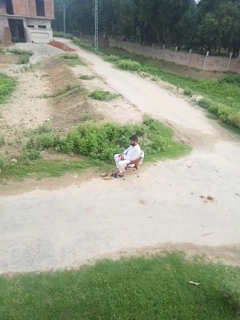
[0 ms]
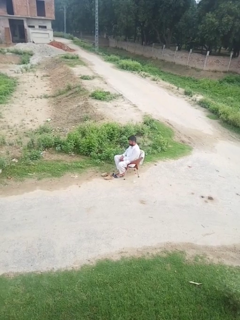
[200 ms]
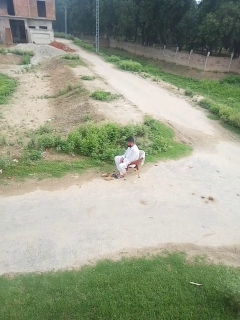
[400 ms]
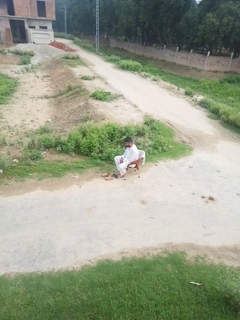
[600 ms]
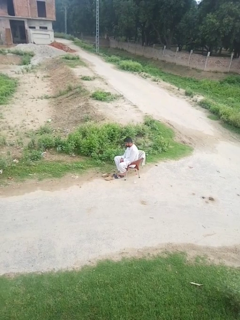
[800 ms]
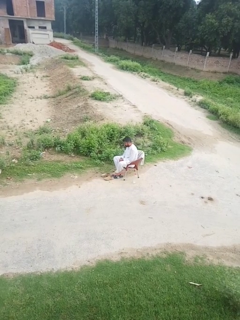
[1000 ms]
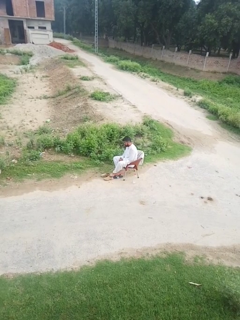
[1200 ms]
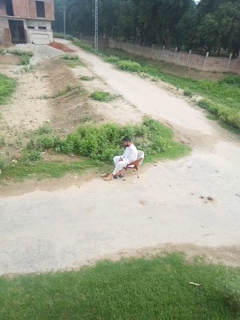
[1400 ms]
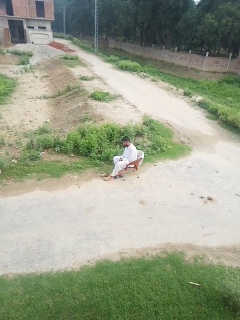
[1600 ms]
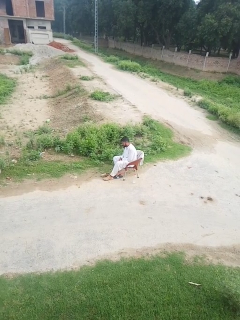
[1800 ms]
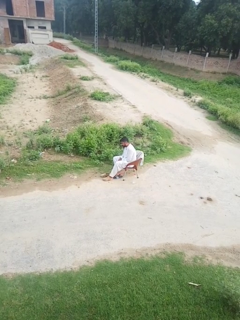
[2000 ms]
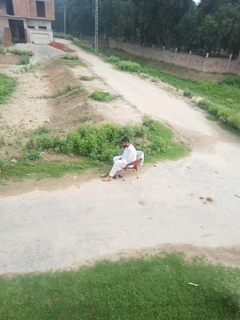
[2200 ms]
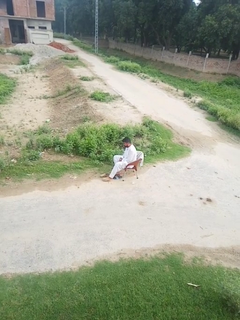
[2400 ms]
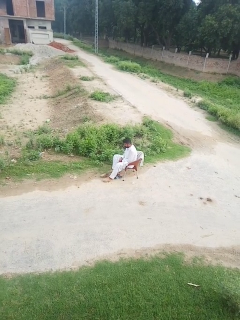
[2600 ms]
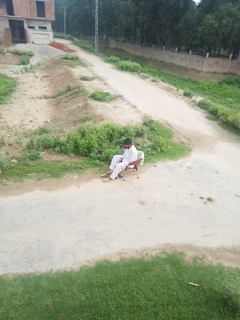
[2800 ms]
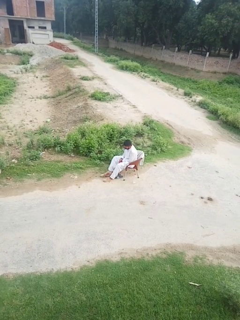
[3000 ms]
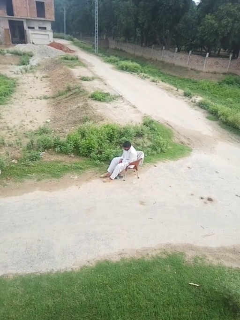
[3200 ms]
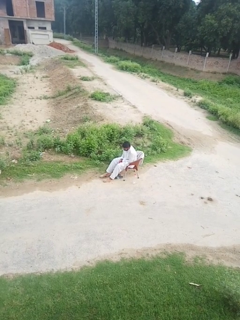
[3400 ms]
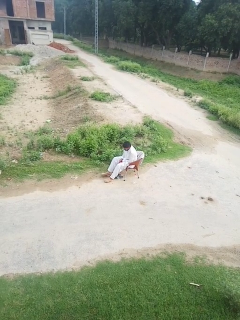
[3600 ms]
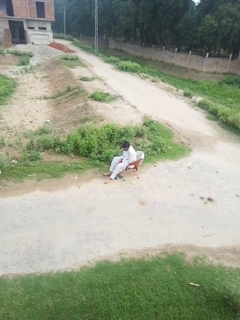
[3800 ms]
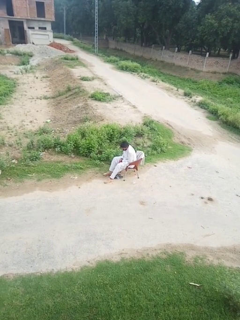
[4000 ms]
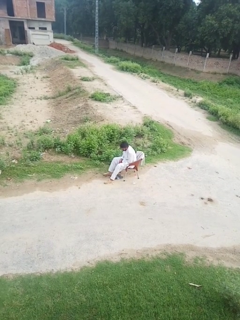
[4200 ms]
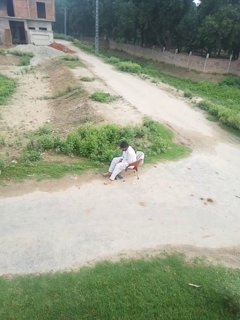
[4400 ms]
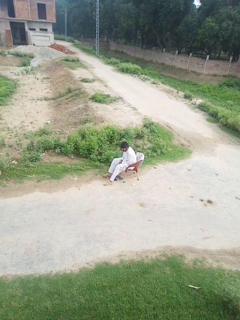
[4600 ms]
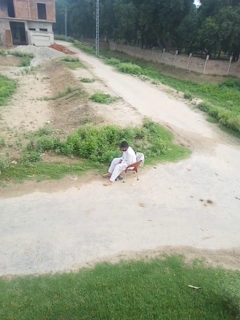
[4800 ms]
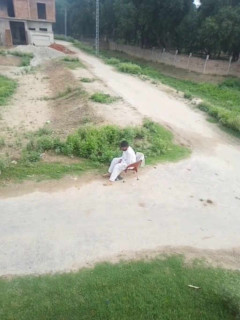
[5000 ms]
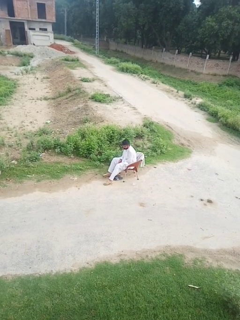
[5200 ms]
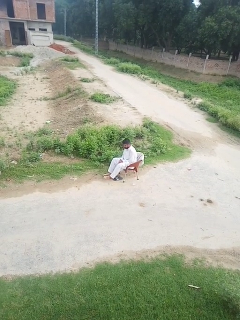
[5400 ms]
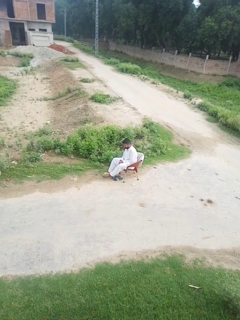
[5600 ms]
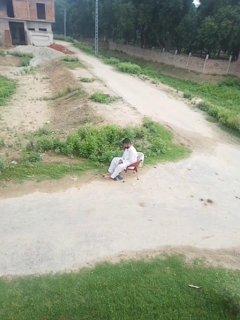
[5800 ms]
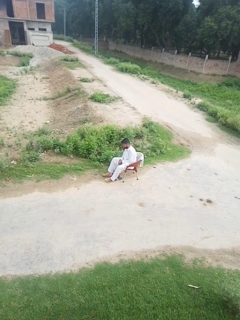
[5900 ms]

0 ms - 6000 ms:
person puts on shoes

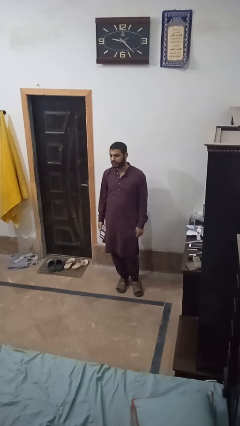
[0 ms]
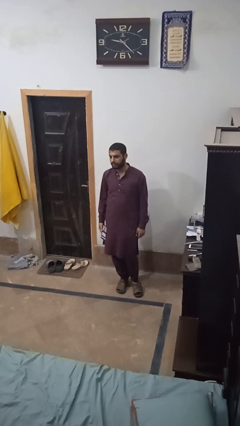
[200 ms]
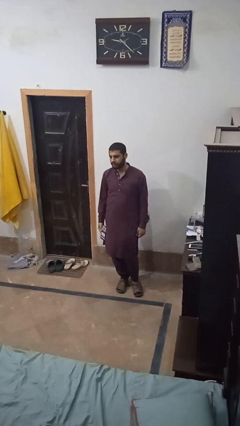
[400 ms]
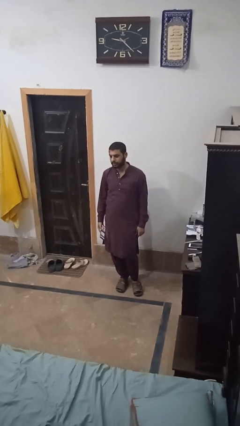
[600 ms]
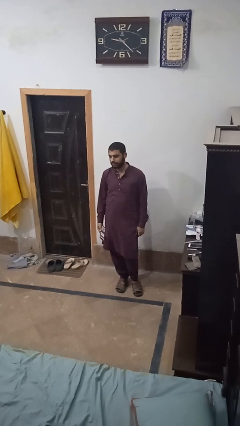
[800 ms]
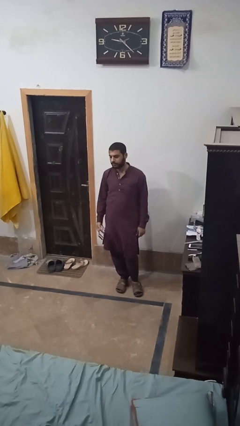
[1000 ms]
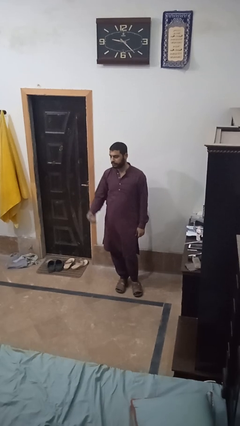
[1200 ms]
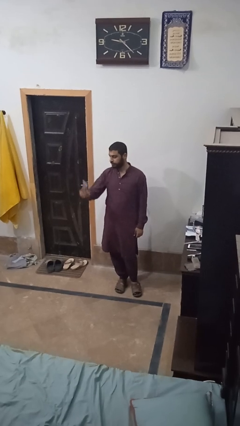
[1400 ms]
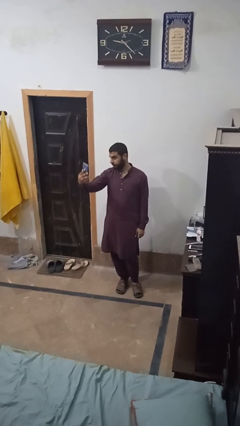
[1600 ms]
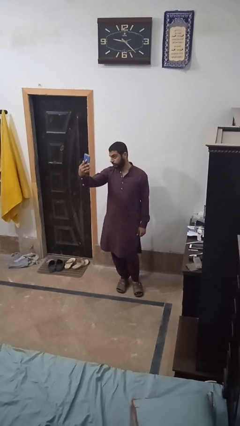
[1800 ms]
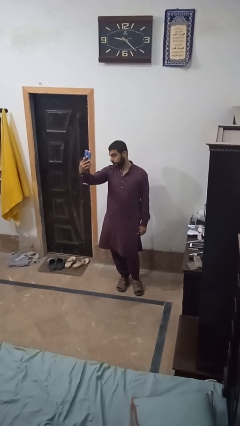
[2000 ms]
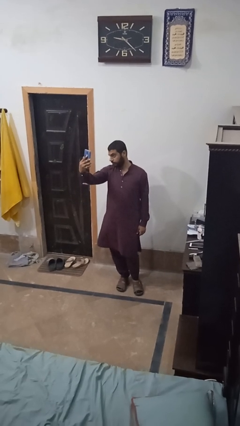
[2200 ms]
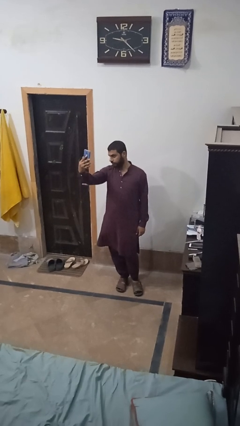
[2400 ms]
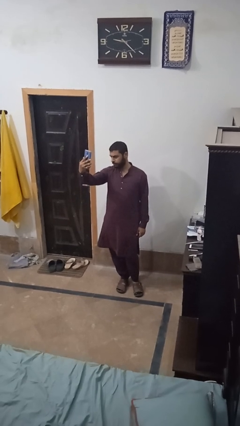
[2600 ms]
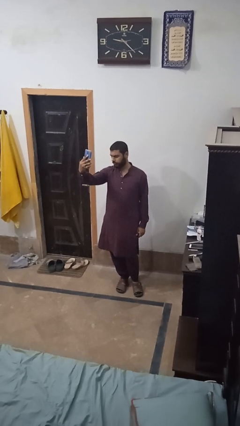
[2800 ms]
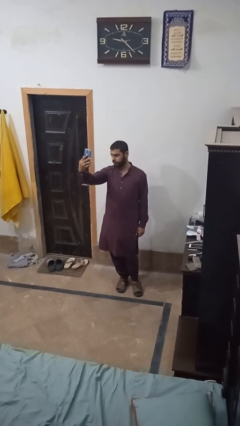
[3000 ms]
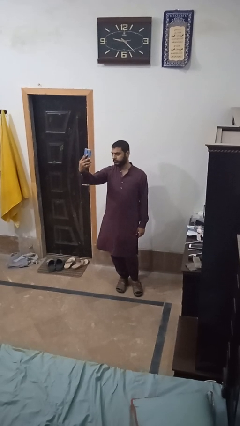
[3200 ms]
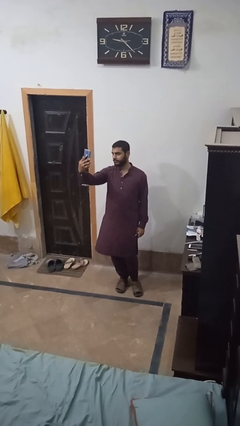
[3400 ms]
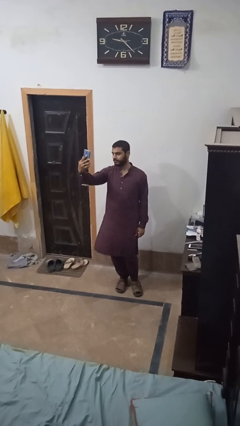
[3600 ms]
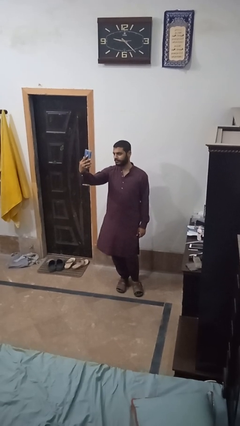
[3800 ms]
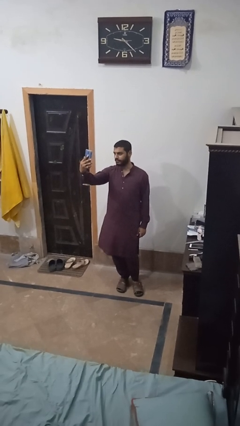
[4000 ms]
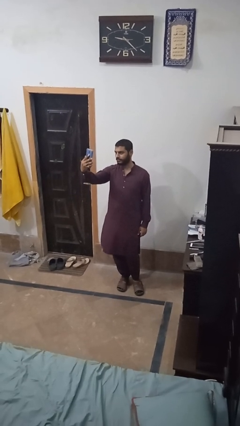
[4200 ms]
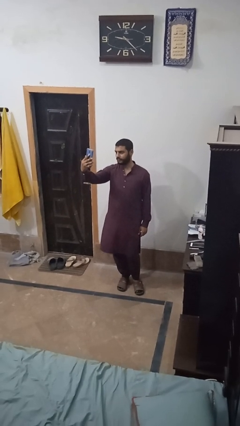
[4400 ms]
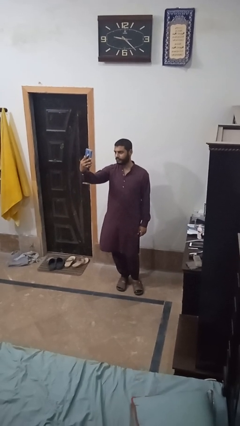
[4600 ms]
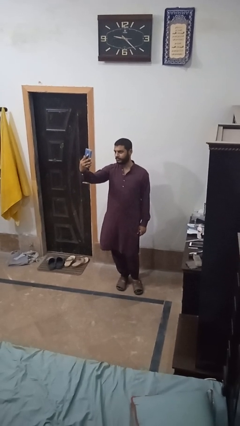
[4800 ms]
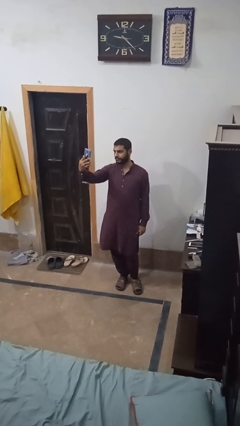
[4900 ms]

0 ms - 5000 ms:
person takes selfie

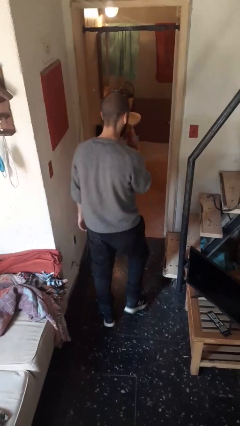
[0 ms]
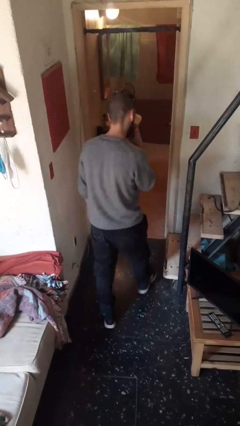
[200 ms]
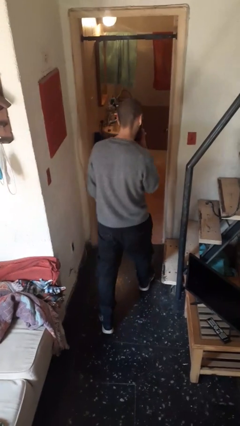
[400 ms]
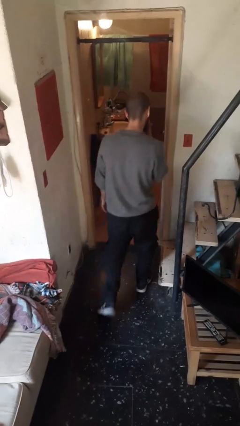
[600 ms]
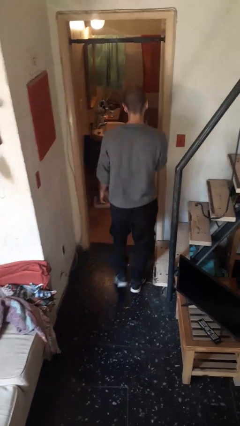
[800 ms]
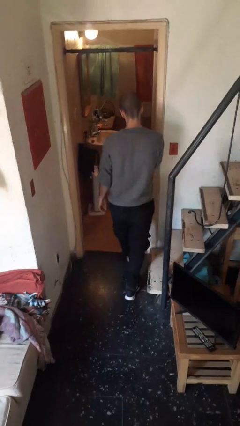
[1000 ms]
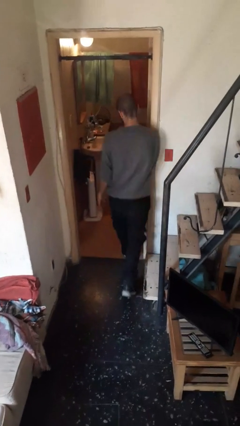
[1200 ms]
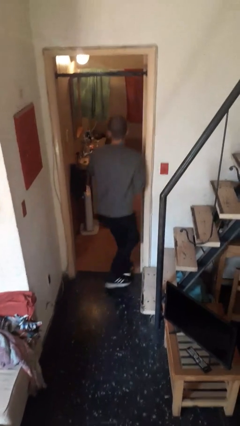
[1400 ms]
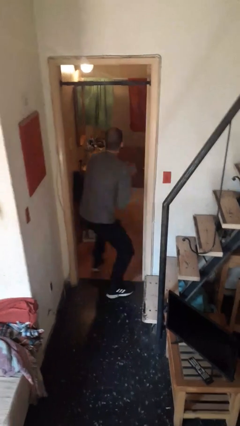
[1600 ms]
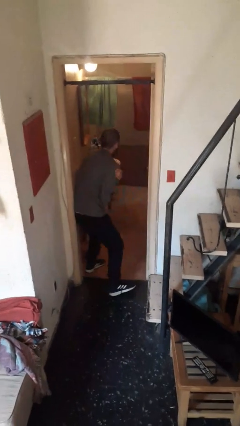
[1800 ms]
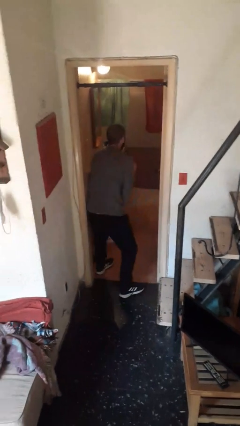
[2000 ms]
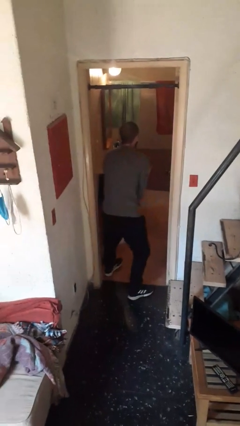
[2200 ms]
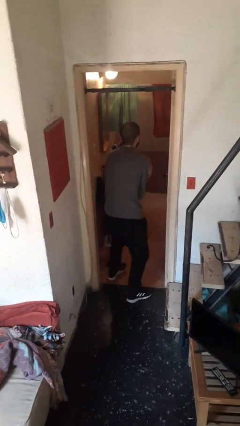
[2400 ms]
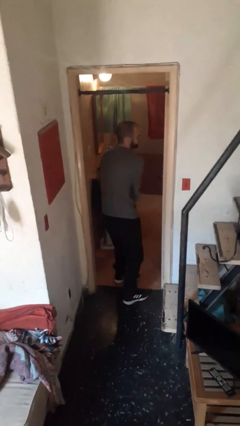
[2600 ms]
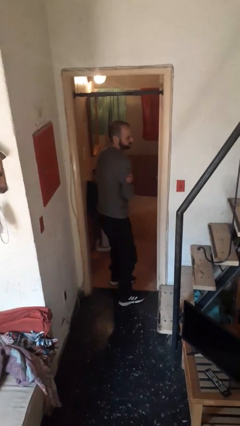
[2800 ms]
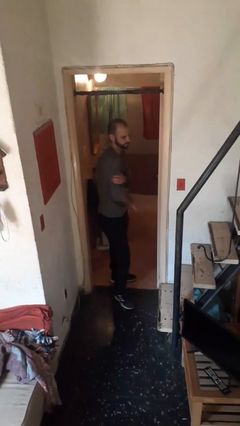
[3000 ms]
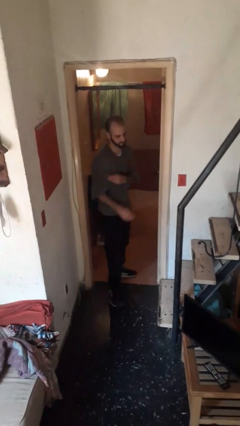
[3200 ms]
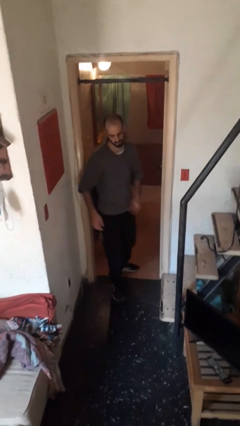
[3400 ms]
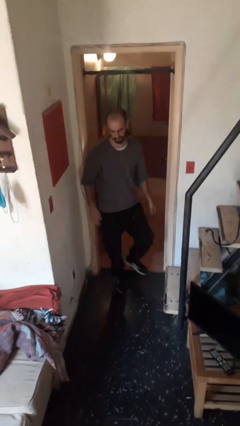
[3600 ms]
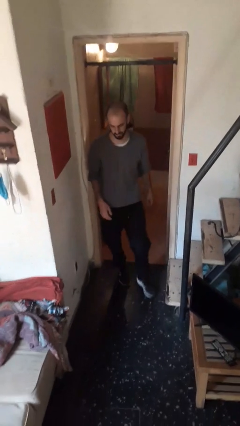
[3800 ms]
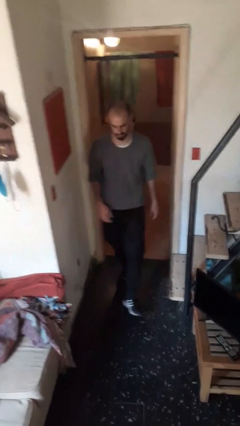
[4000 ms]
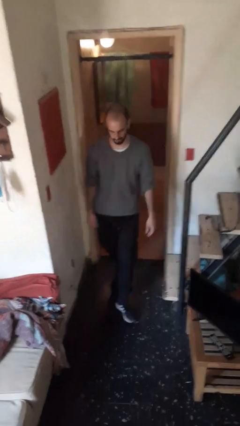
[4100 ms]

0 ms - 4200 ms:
person bumps into wall

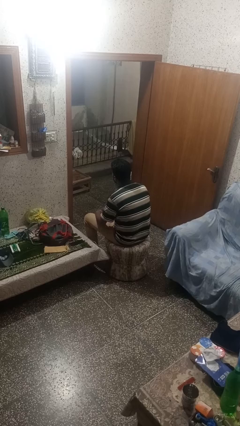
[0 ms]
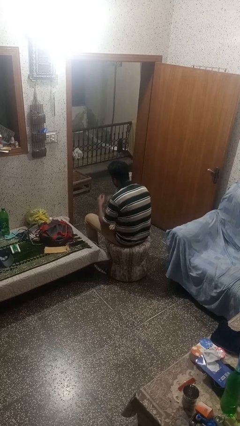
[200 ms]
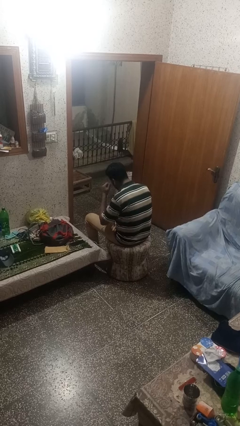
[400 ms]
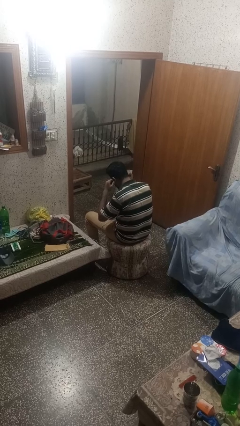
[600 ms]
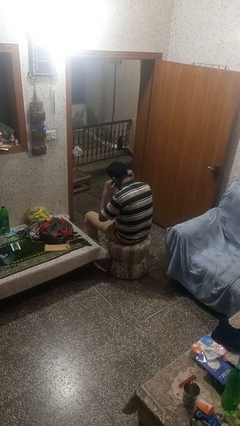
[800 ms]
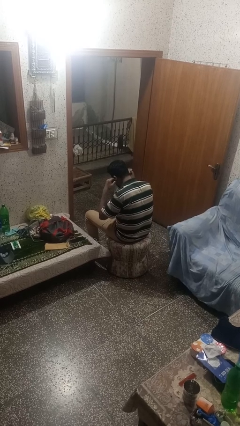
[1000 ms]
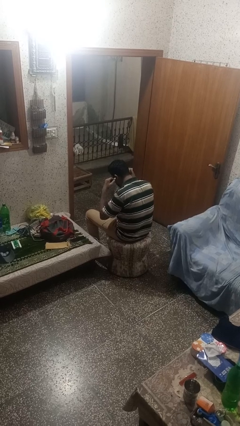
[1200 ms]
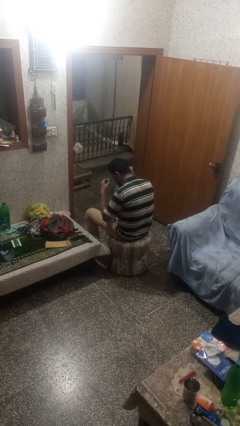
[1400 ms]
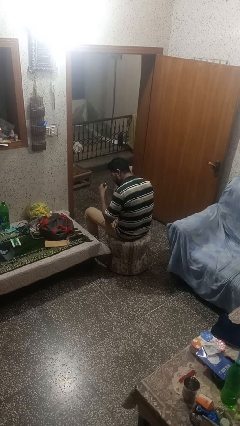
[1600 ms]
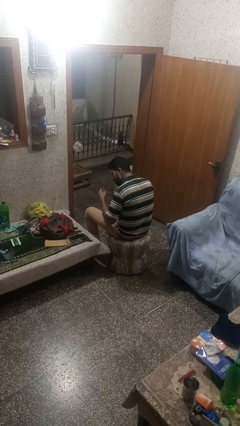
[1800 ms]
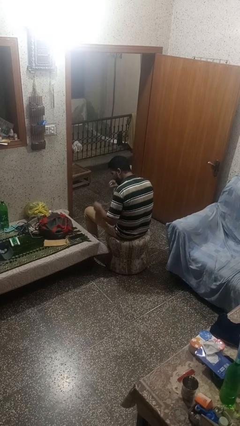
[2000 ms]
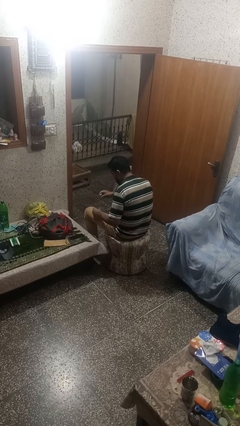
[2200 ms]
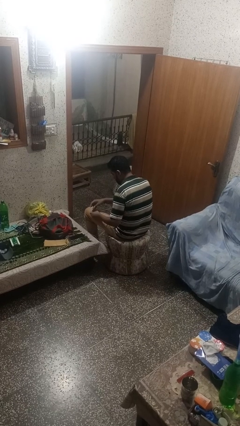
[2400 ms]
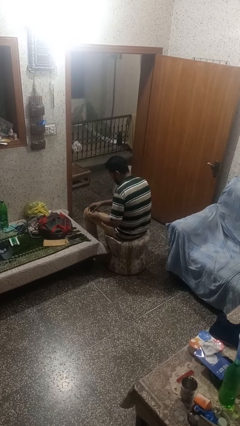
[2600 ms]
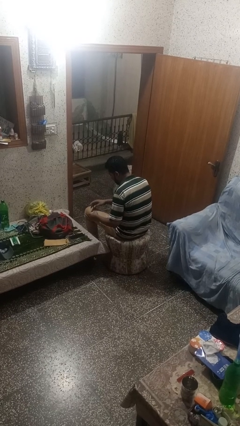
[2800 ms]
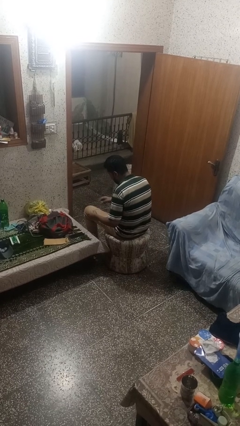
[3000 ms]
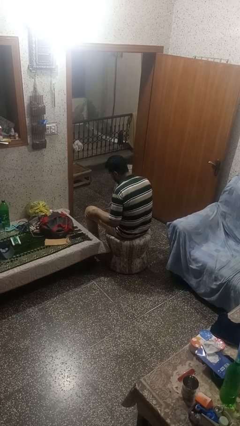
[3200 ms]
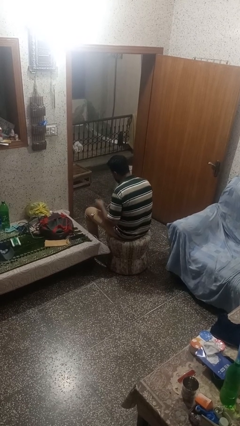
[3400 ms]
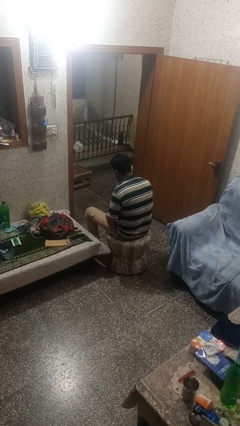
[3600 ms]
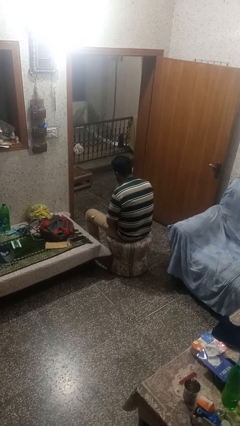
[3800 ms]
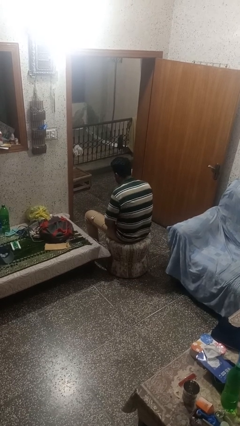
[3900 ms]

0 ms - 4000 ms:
person takes off headphones
